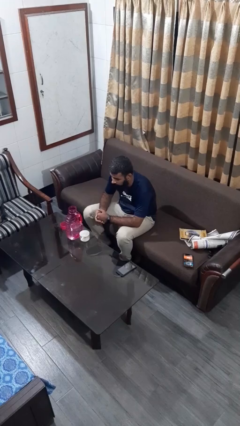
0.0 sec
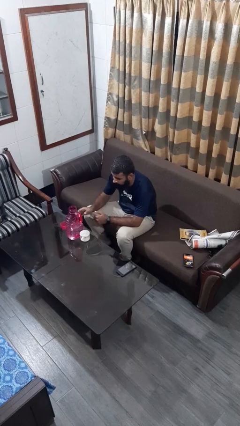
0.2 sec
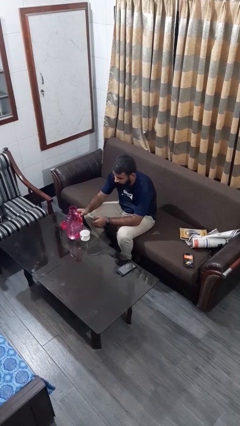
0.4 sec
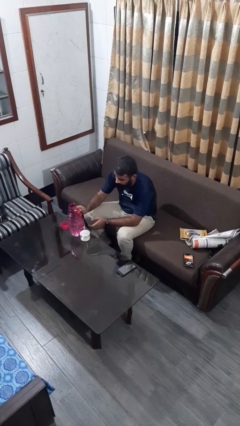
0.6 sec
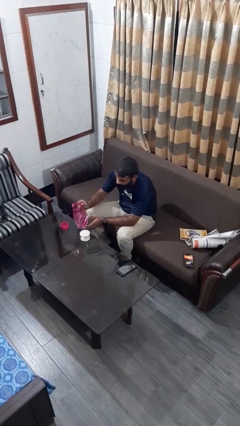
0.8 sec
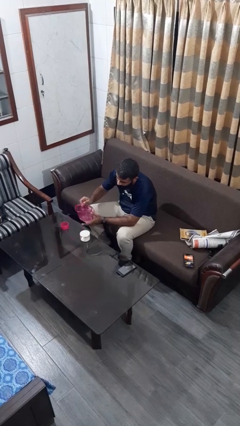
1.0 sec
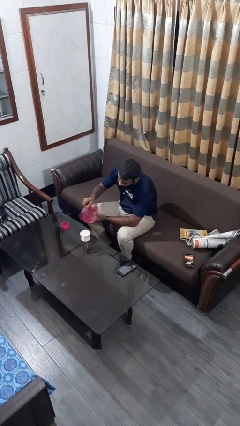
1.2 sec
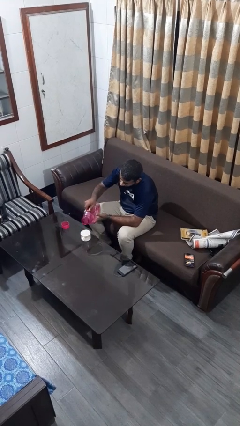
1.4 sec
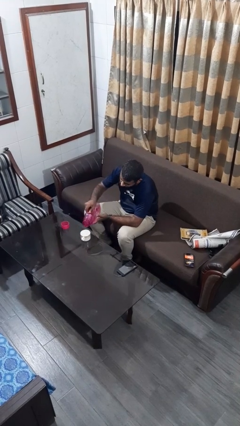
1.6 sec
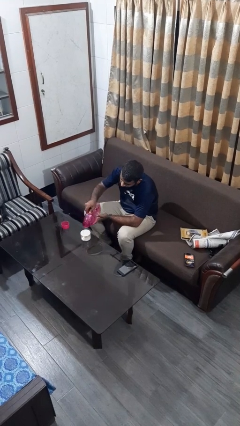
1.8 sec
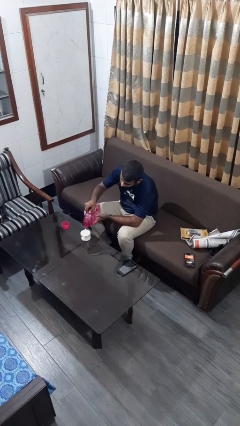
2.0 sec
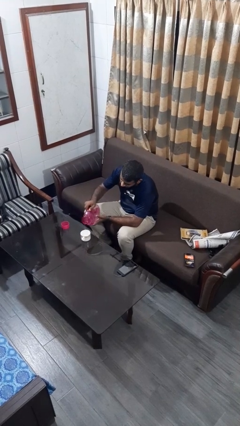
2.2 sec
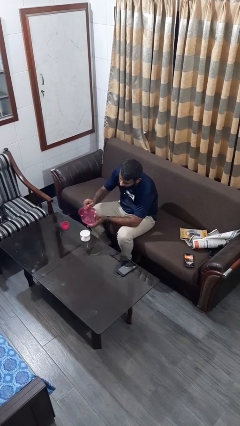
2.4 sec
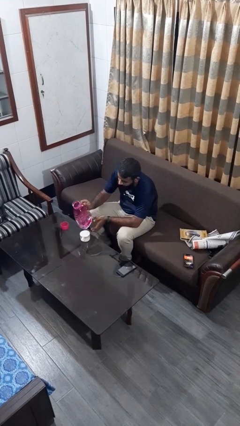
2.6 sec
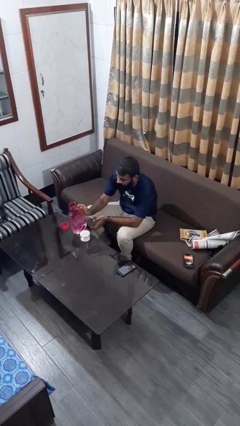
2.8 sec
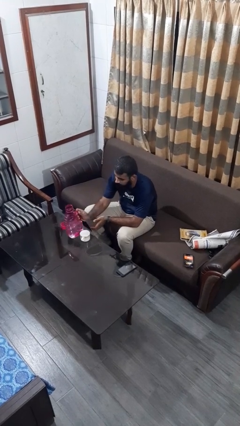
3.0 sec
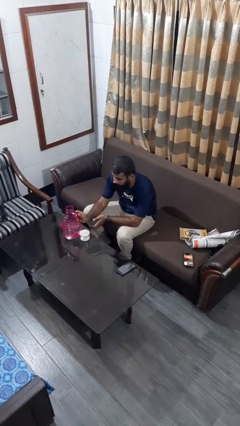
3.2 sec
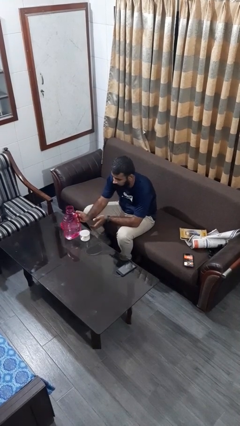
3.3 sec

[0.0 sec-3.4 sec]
person pours liquid into cup

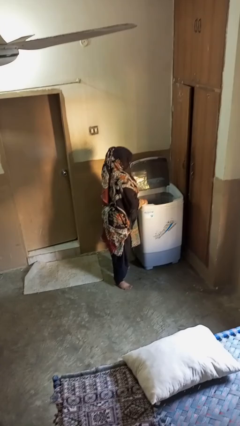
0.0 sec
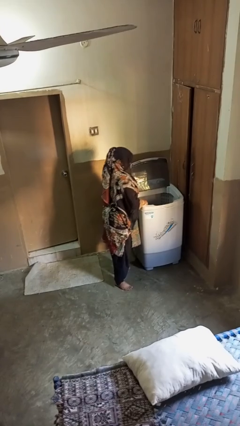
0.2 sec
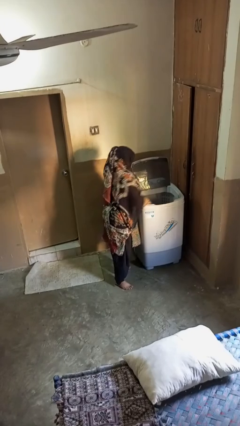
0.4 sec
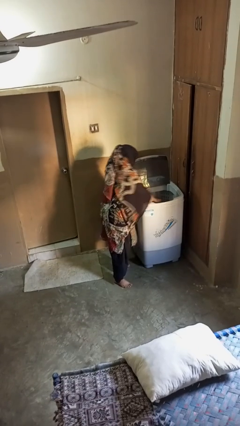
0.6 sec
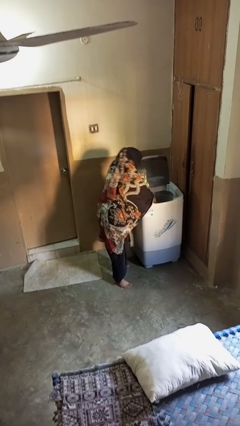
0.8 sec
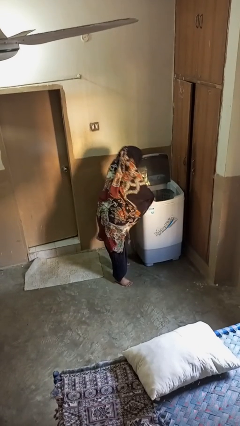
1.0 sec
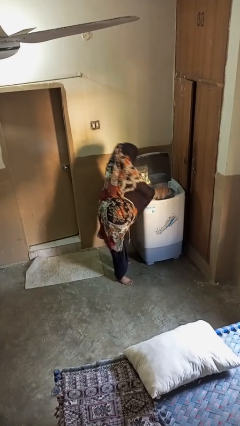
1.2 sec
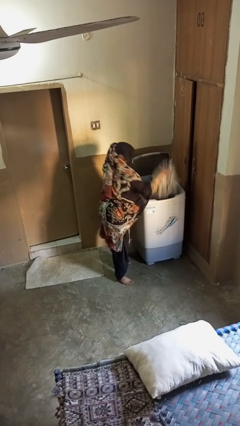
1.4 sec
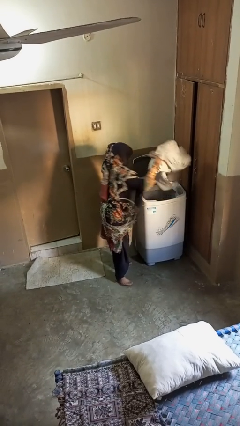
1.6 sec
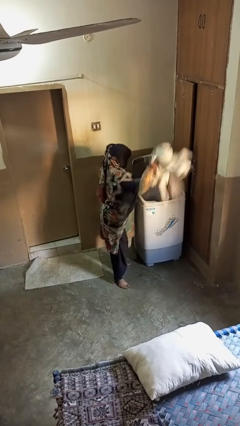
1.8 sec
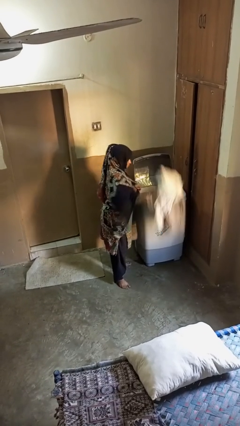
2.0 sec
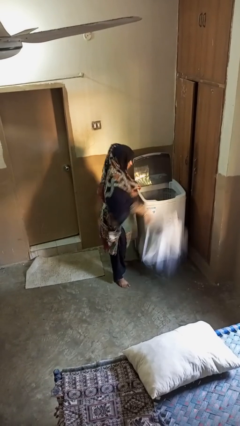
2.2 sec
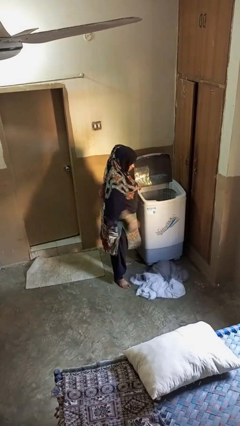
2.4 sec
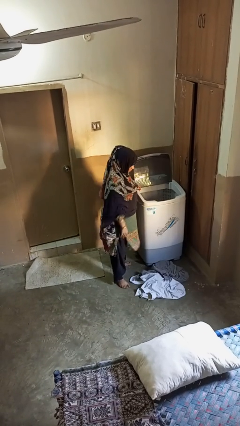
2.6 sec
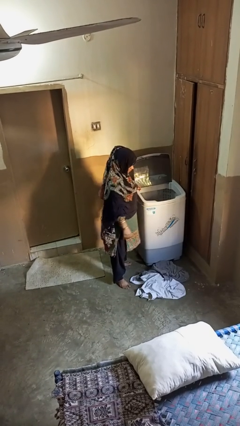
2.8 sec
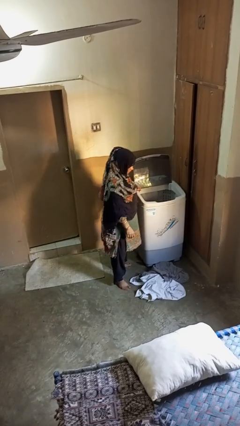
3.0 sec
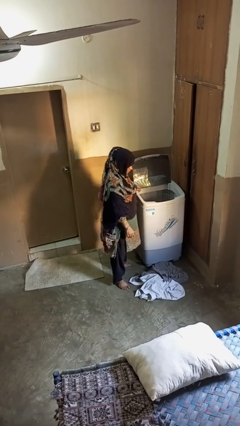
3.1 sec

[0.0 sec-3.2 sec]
person unloads clotheswasher

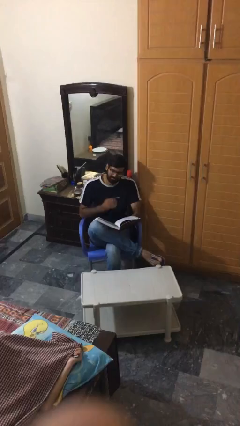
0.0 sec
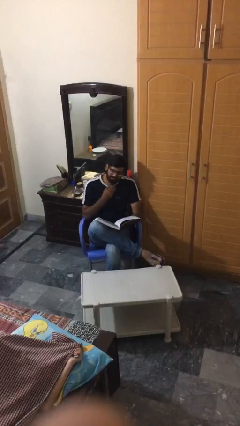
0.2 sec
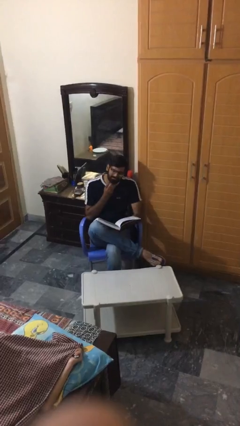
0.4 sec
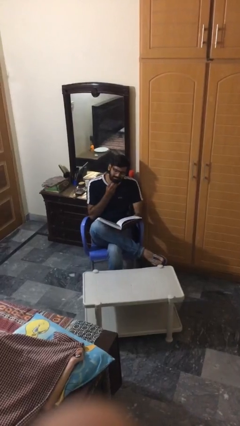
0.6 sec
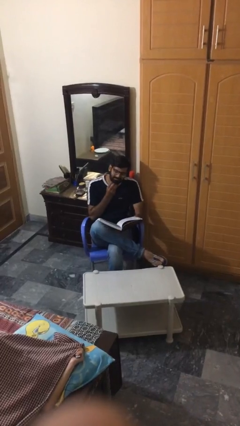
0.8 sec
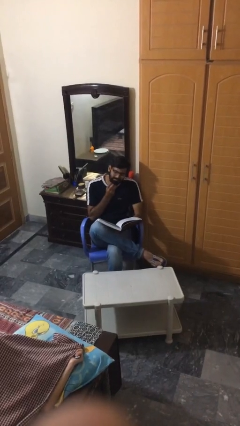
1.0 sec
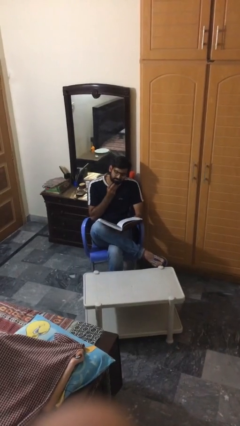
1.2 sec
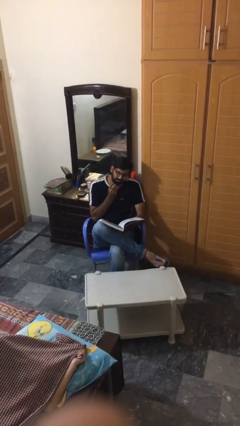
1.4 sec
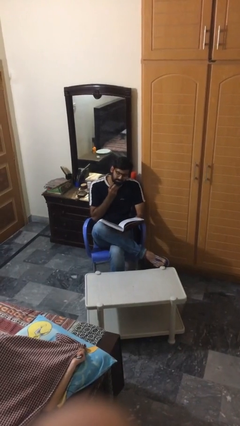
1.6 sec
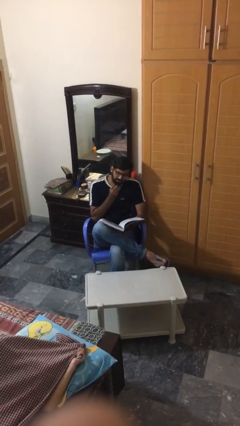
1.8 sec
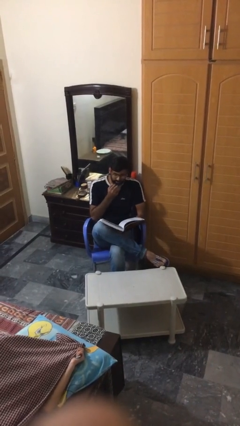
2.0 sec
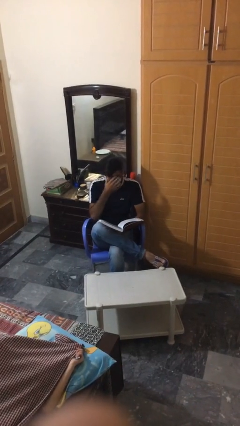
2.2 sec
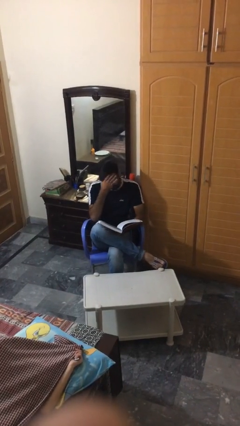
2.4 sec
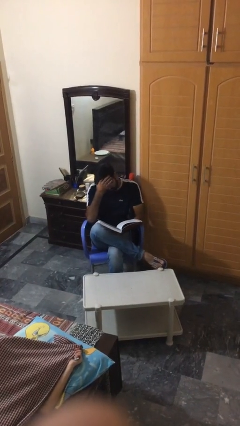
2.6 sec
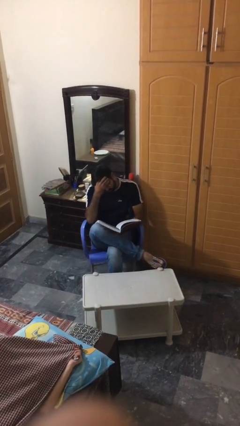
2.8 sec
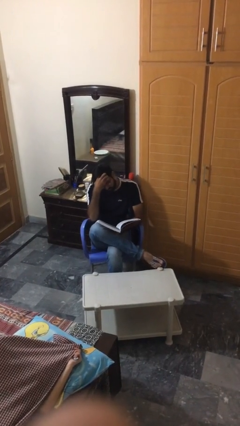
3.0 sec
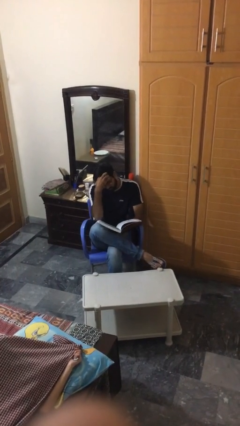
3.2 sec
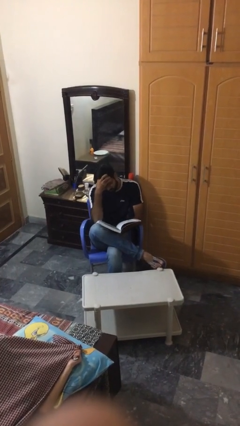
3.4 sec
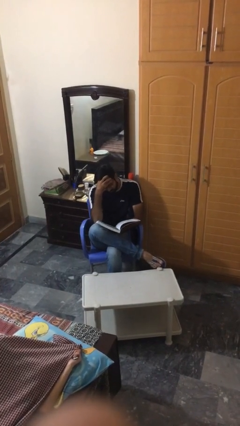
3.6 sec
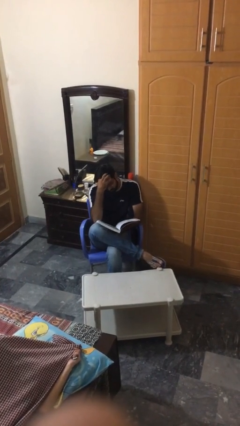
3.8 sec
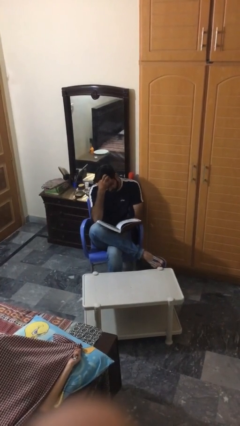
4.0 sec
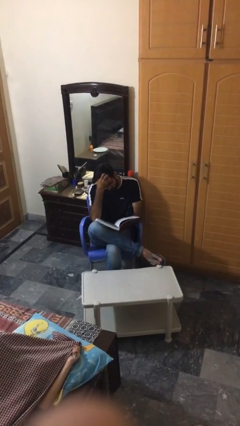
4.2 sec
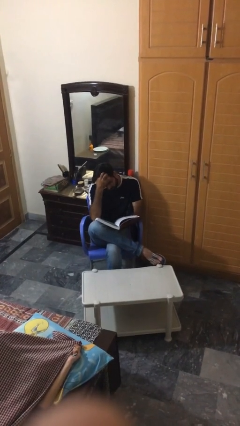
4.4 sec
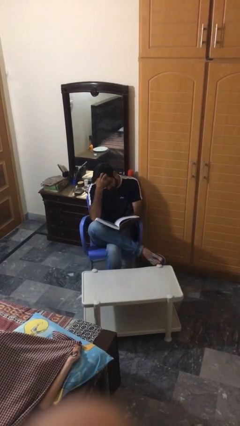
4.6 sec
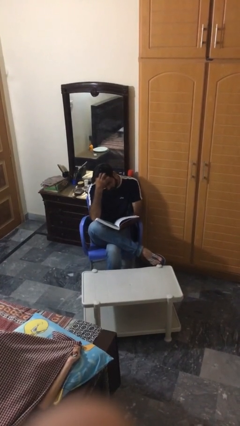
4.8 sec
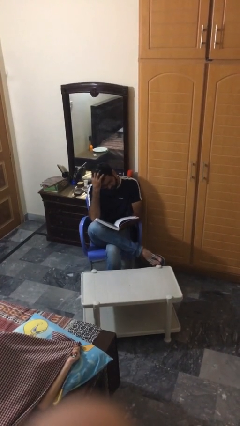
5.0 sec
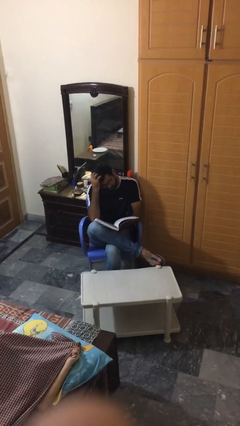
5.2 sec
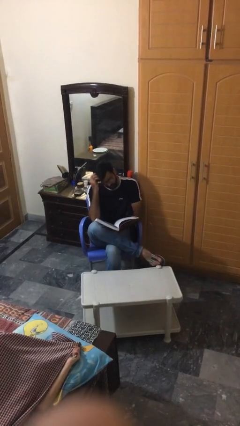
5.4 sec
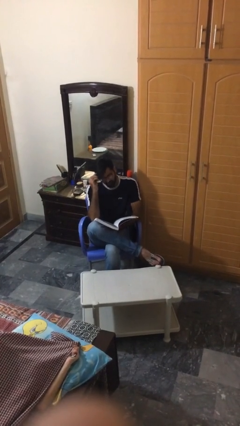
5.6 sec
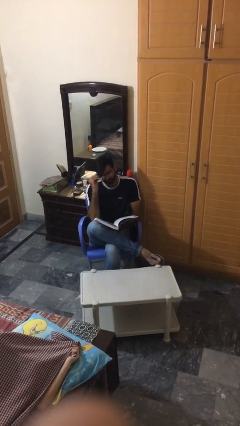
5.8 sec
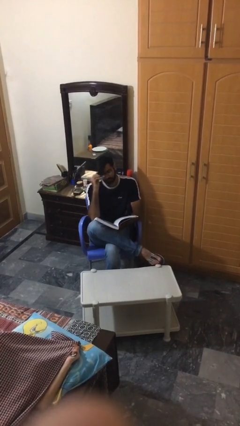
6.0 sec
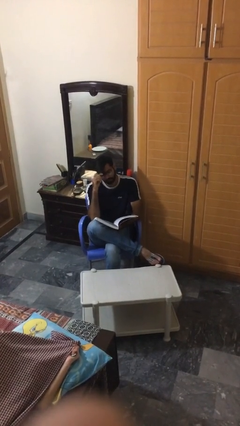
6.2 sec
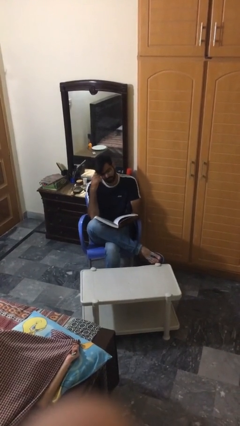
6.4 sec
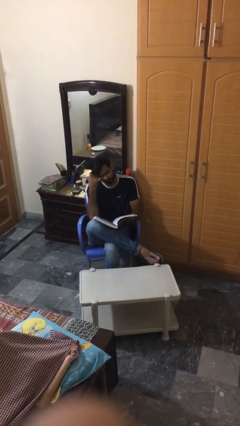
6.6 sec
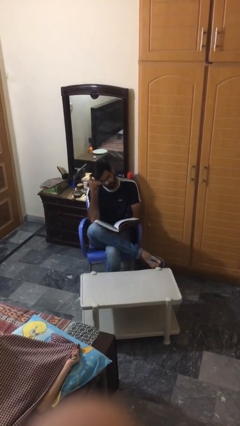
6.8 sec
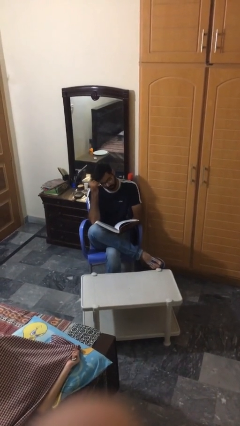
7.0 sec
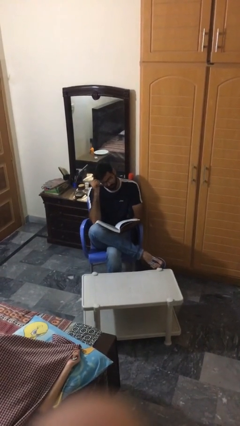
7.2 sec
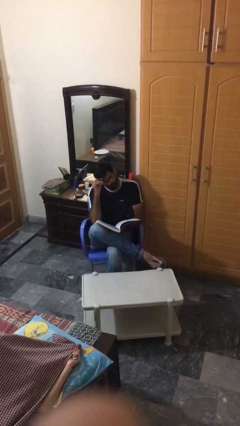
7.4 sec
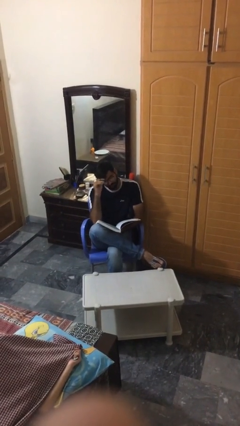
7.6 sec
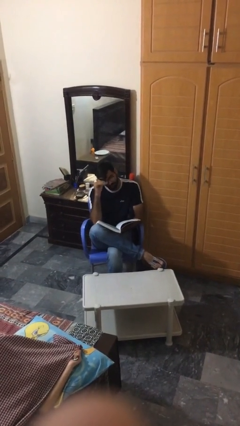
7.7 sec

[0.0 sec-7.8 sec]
person reads document

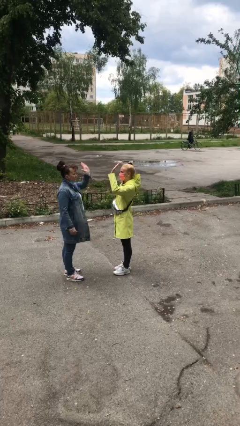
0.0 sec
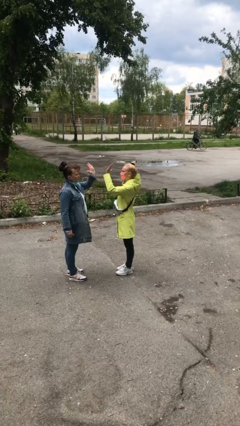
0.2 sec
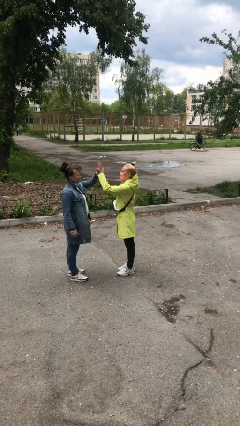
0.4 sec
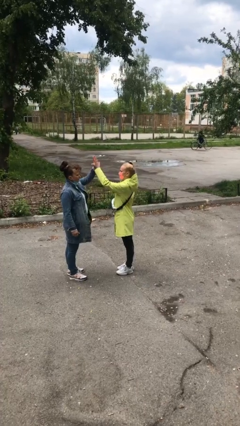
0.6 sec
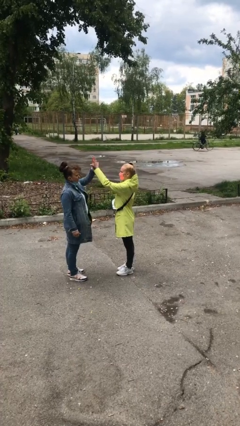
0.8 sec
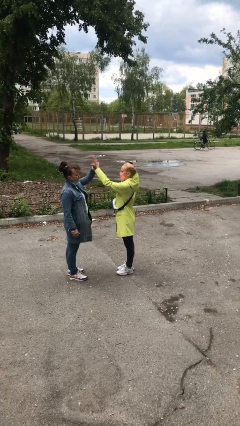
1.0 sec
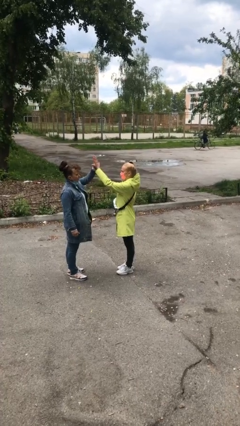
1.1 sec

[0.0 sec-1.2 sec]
person highfives hand

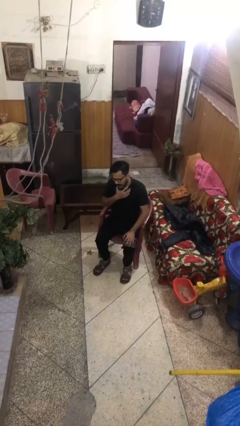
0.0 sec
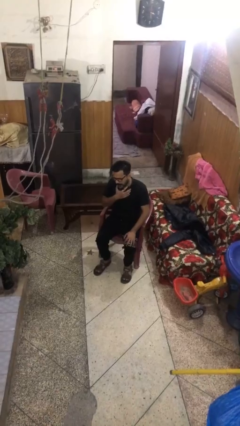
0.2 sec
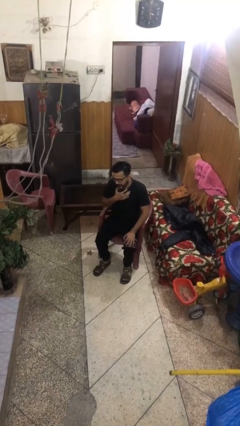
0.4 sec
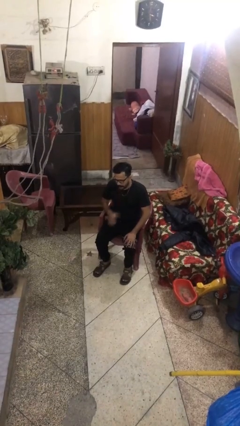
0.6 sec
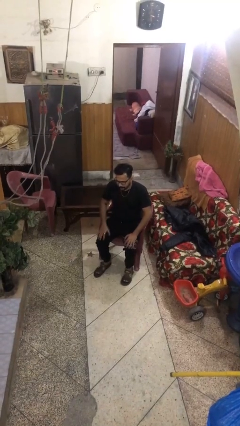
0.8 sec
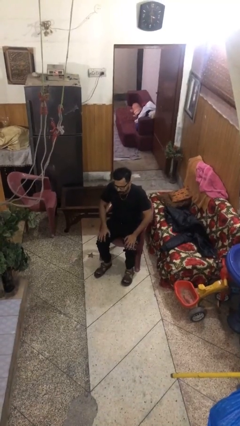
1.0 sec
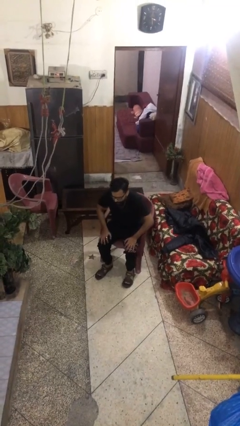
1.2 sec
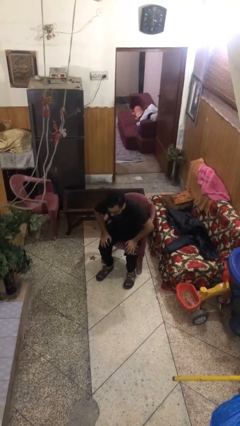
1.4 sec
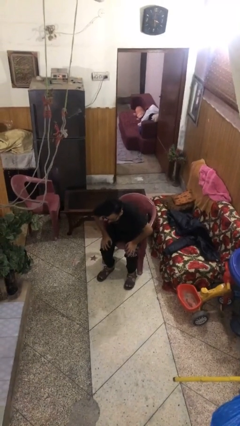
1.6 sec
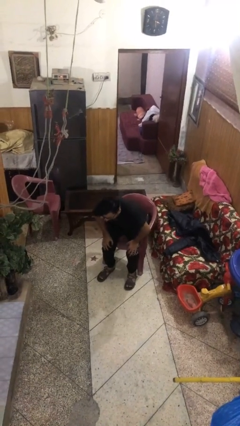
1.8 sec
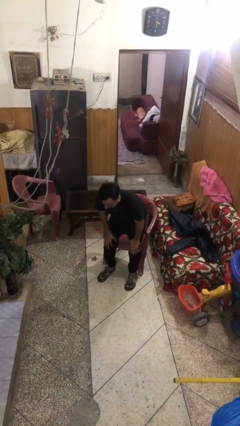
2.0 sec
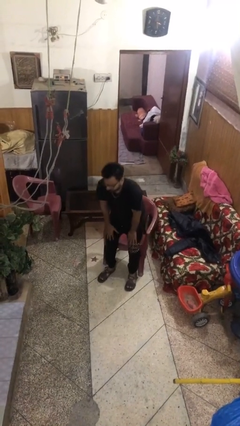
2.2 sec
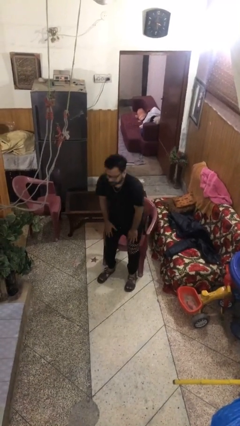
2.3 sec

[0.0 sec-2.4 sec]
person stands up
